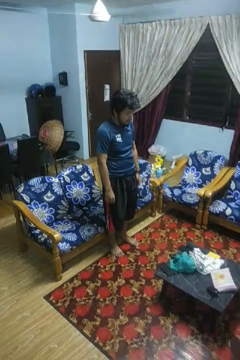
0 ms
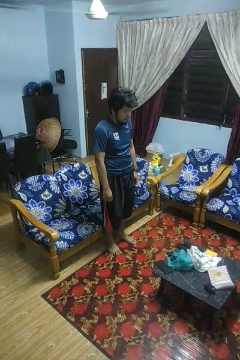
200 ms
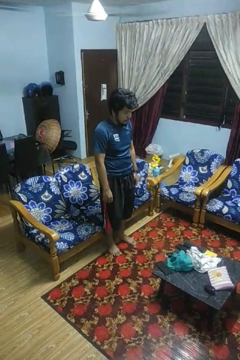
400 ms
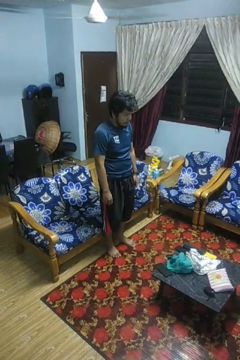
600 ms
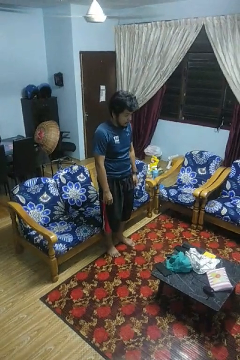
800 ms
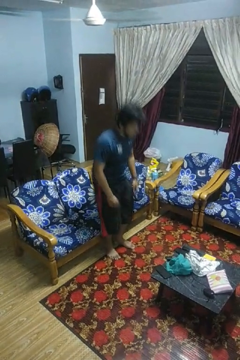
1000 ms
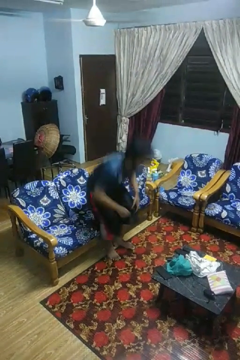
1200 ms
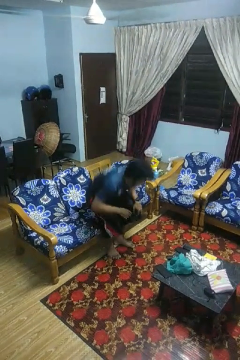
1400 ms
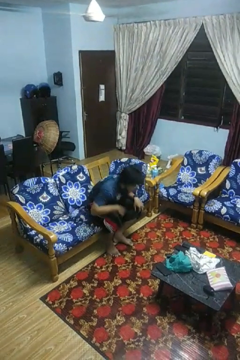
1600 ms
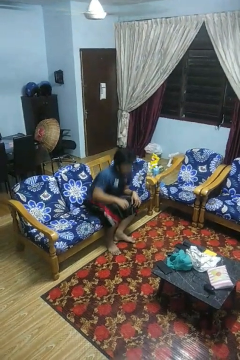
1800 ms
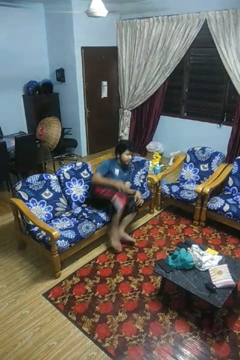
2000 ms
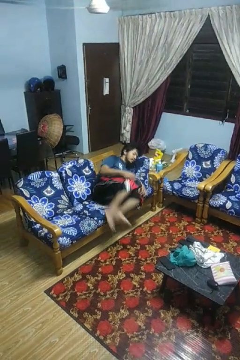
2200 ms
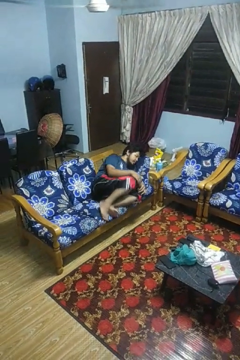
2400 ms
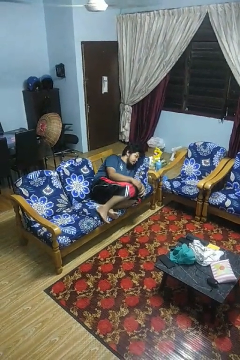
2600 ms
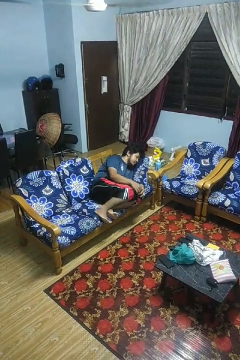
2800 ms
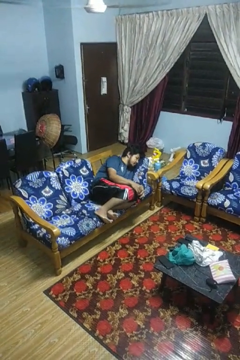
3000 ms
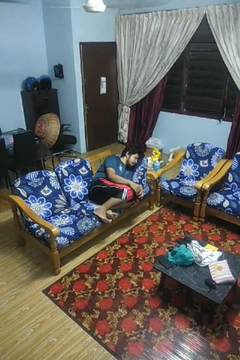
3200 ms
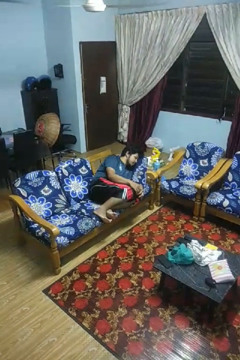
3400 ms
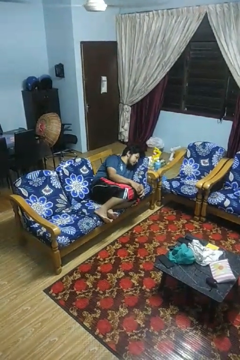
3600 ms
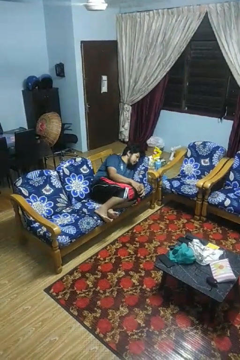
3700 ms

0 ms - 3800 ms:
person lies down on couch

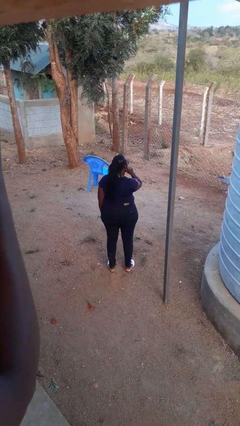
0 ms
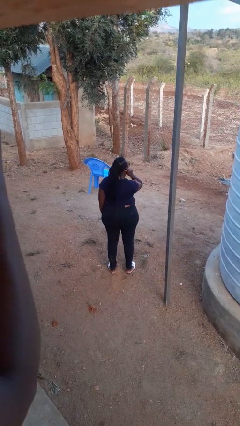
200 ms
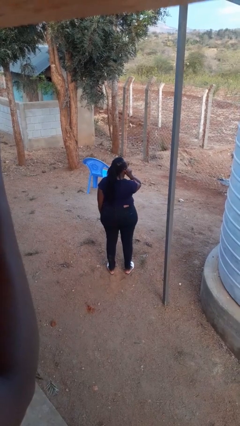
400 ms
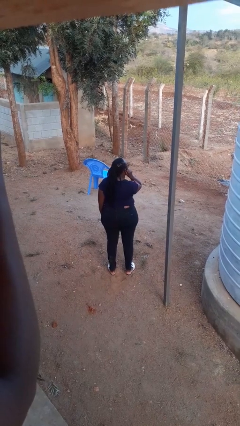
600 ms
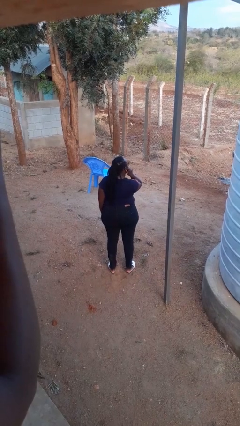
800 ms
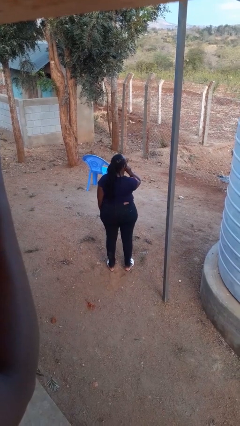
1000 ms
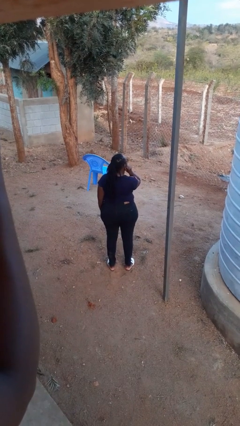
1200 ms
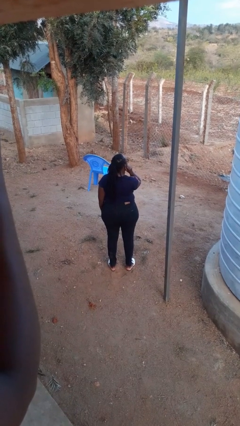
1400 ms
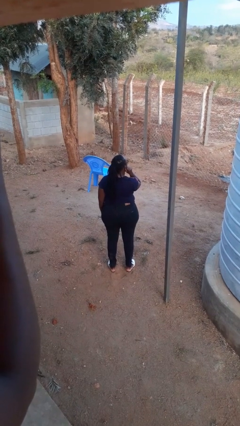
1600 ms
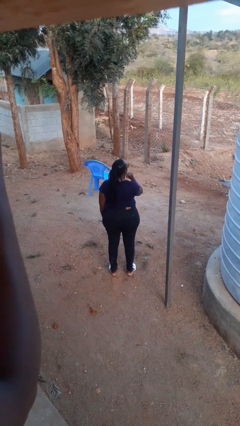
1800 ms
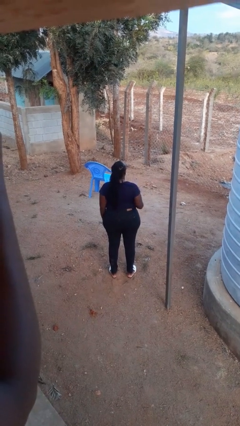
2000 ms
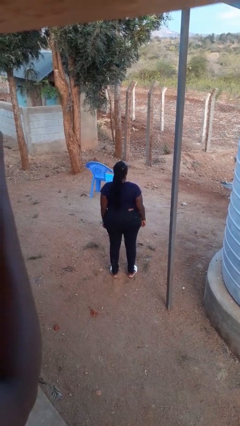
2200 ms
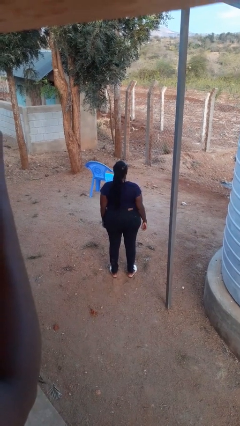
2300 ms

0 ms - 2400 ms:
person touches earlobe

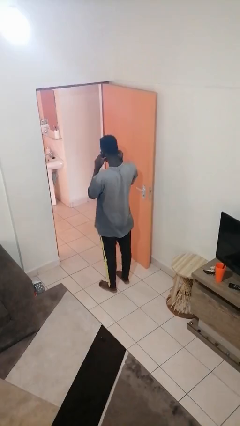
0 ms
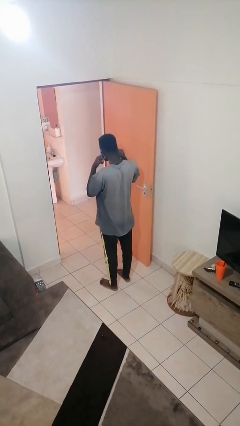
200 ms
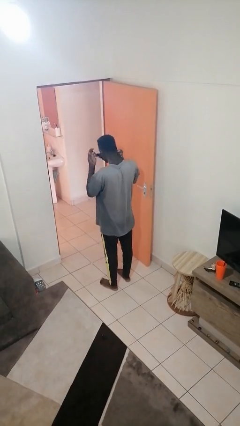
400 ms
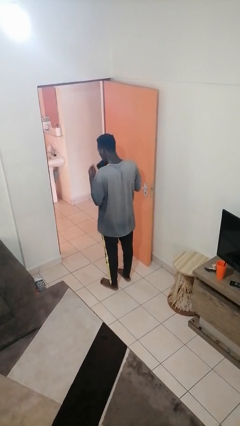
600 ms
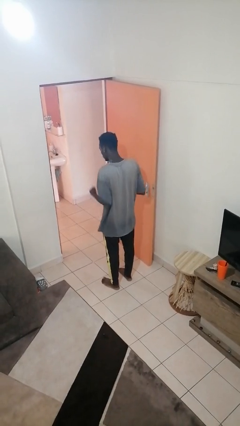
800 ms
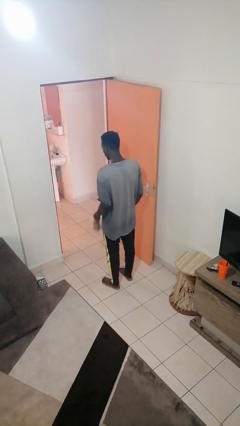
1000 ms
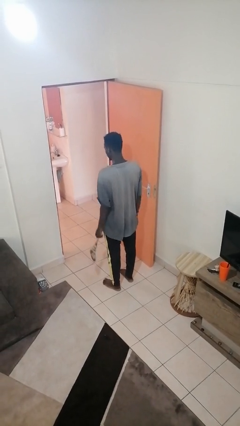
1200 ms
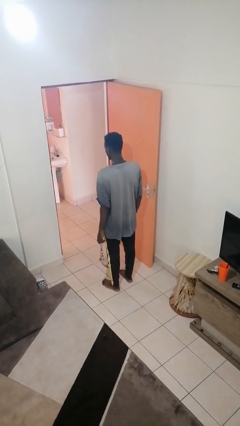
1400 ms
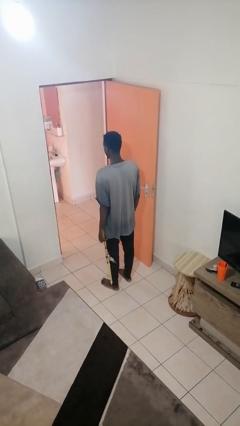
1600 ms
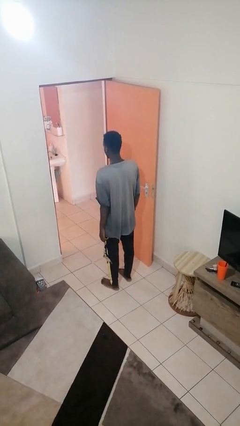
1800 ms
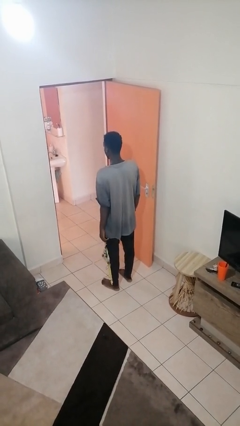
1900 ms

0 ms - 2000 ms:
person takes off facemask

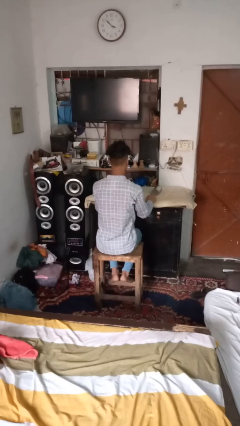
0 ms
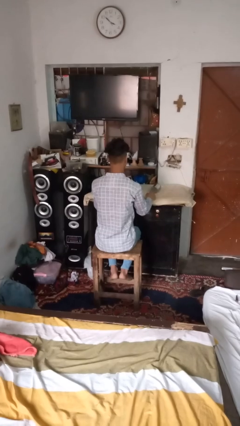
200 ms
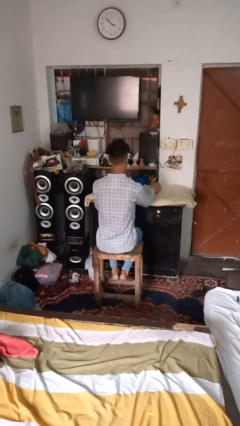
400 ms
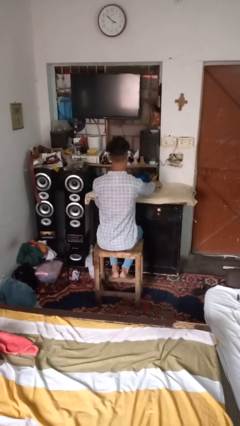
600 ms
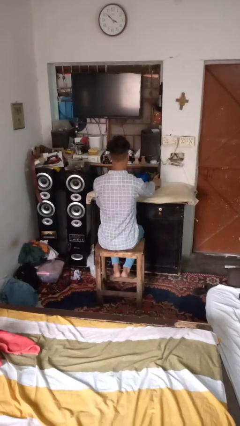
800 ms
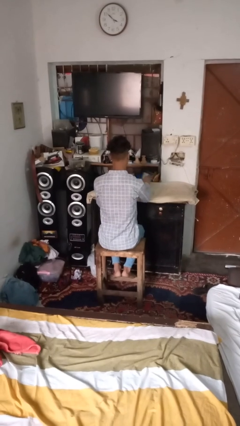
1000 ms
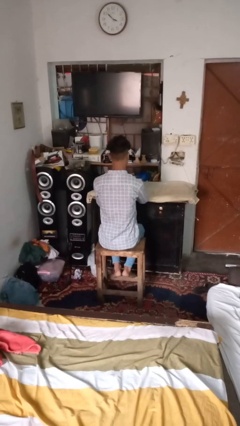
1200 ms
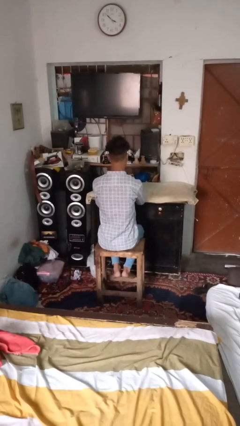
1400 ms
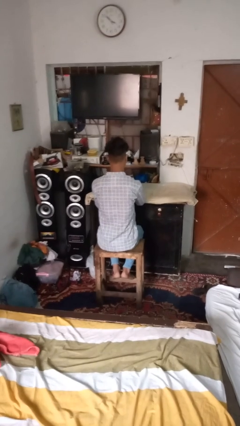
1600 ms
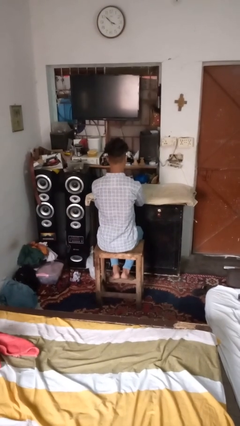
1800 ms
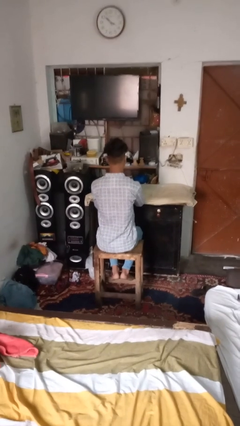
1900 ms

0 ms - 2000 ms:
person sets upright glass

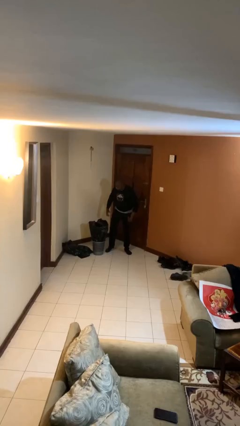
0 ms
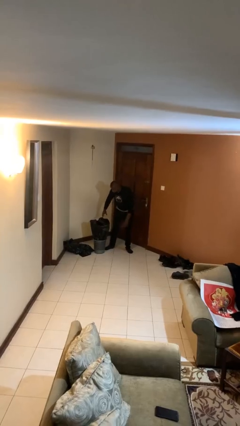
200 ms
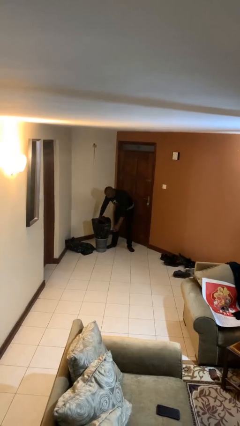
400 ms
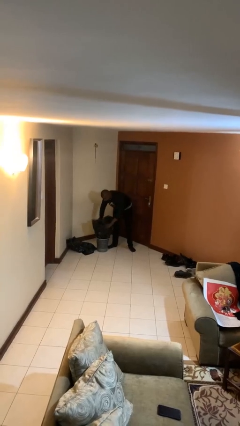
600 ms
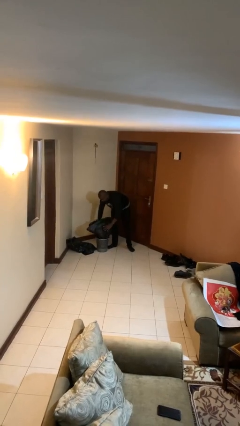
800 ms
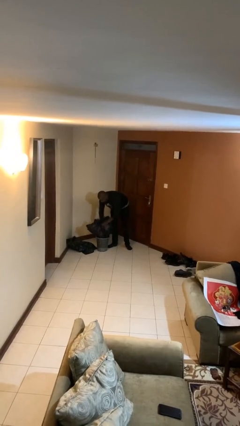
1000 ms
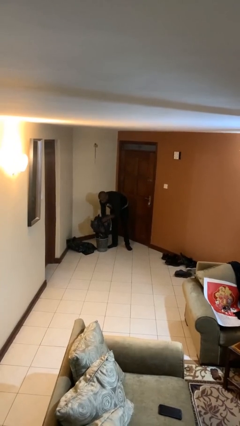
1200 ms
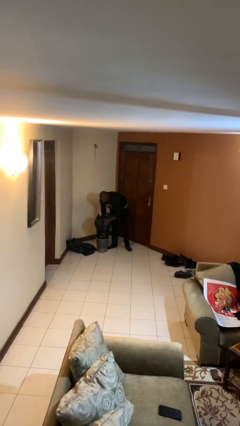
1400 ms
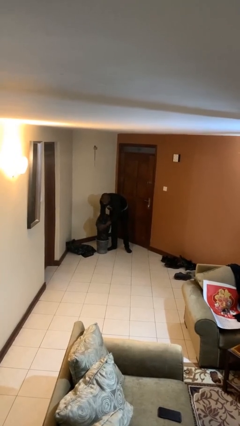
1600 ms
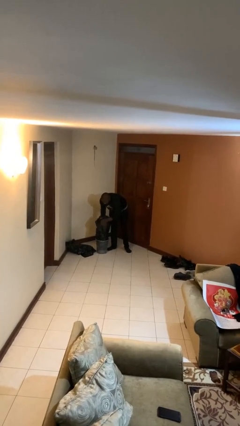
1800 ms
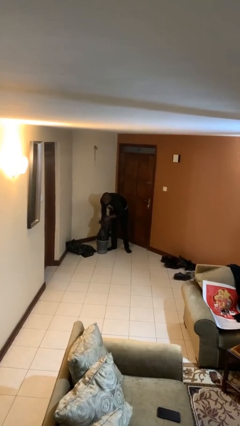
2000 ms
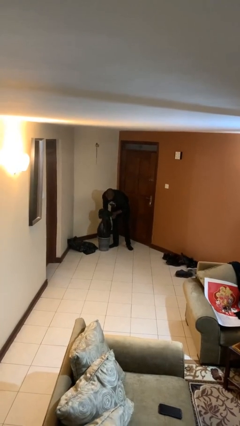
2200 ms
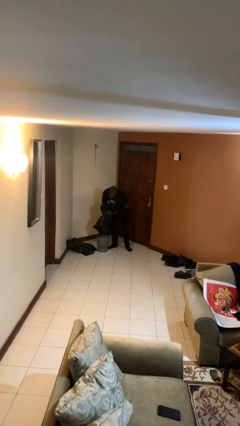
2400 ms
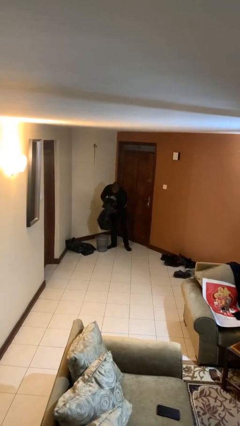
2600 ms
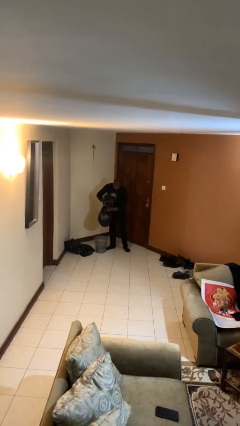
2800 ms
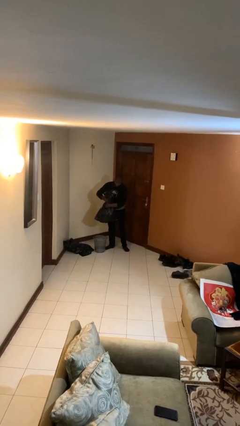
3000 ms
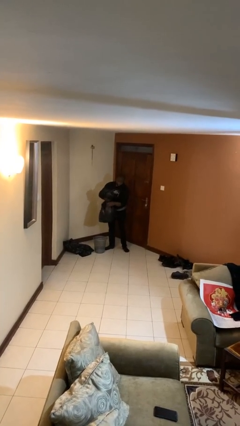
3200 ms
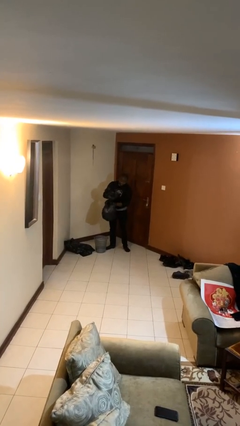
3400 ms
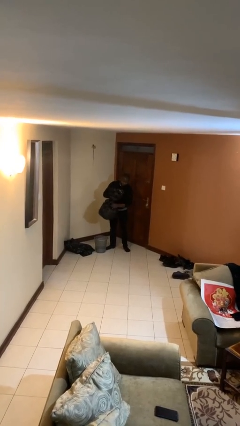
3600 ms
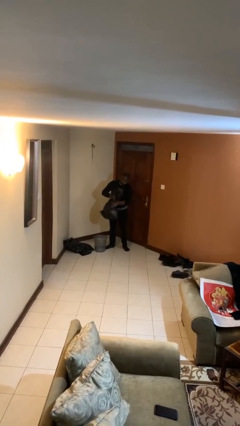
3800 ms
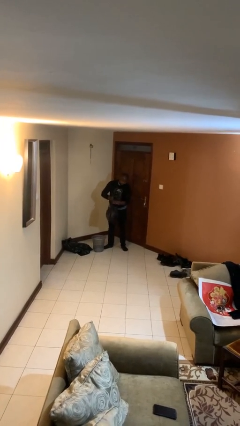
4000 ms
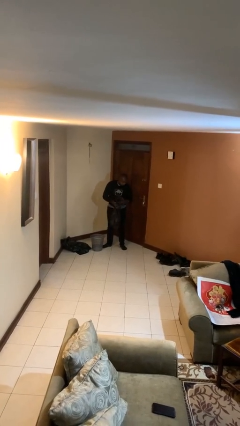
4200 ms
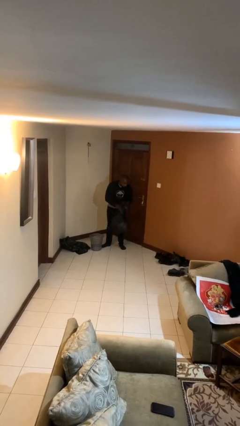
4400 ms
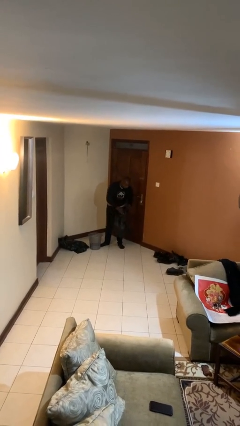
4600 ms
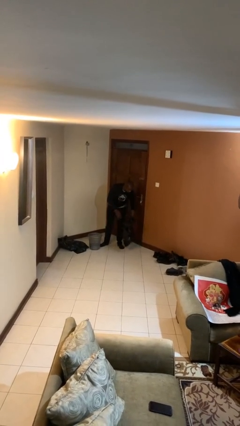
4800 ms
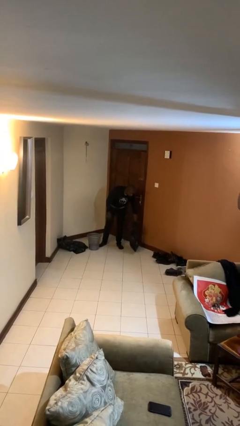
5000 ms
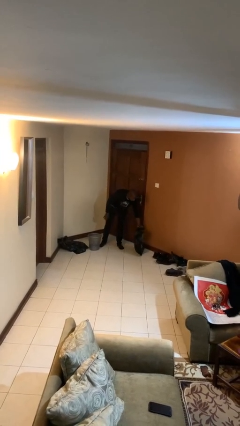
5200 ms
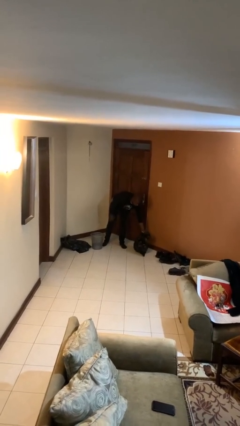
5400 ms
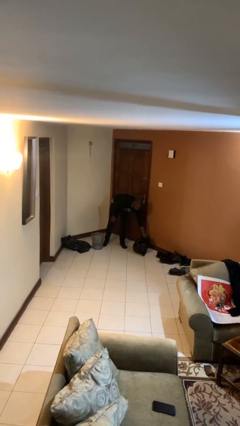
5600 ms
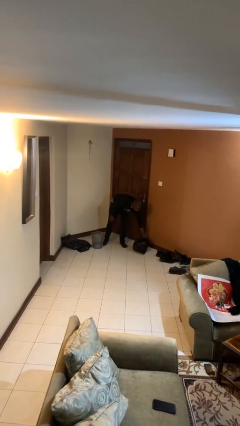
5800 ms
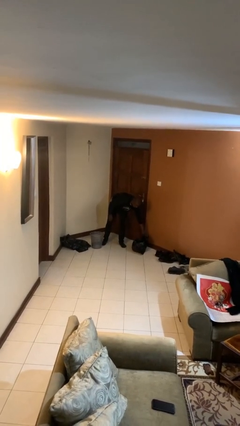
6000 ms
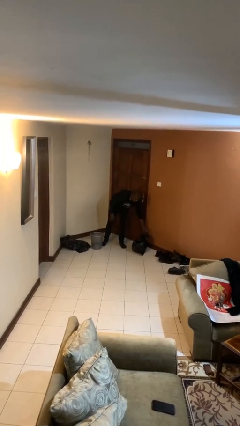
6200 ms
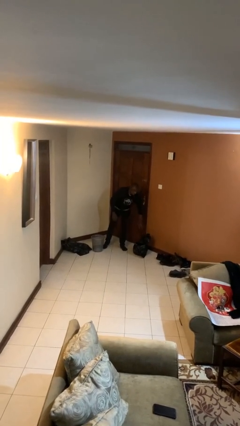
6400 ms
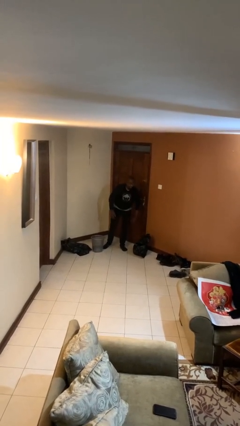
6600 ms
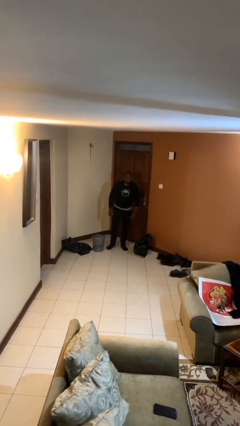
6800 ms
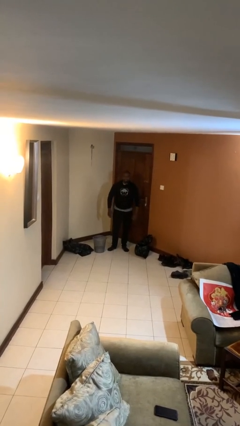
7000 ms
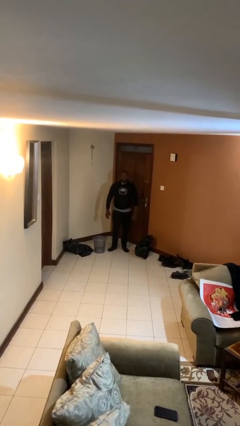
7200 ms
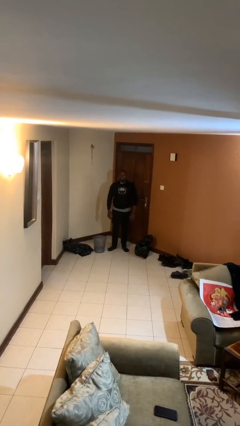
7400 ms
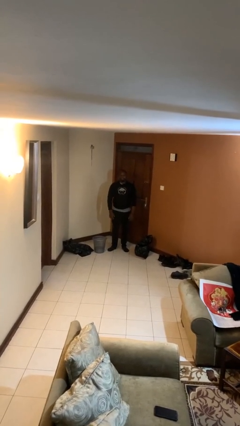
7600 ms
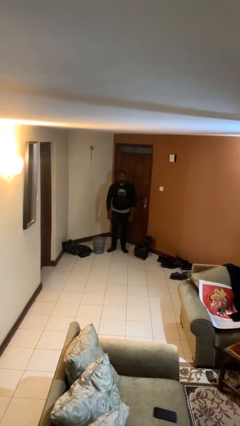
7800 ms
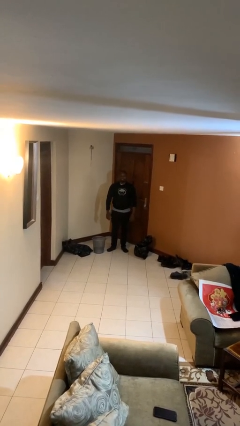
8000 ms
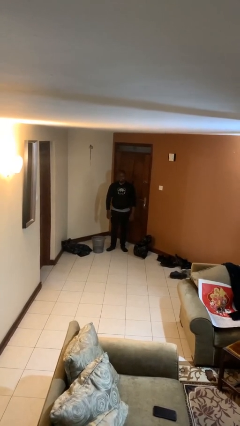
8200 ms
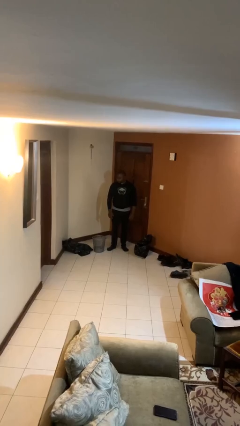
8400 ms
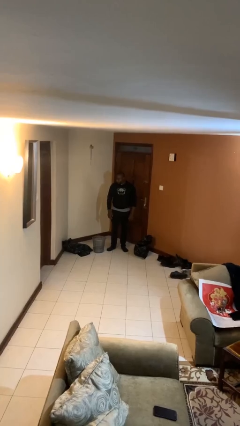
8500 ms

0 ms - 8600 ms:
person removes trashbag from trashcan
